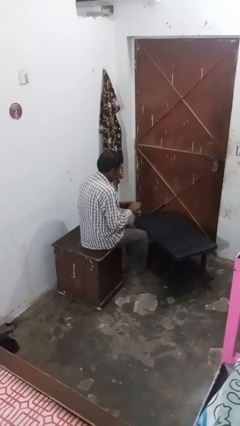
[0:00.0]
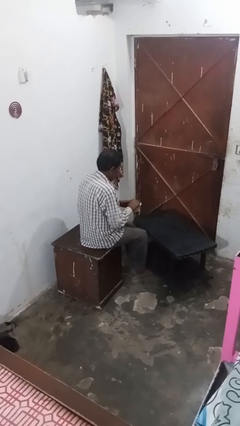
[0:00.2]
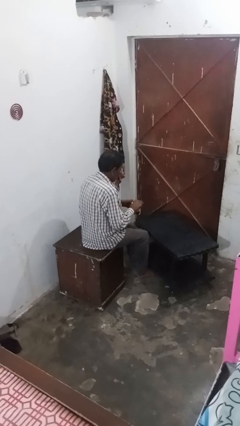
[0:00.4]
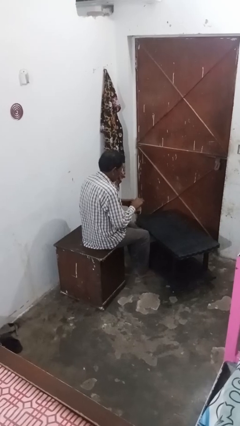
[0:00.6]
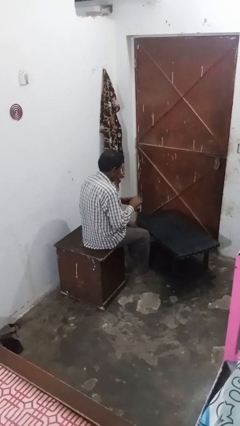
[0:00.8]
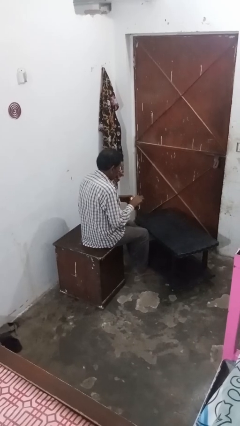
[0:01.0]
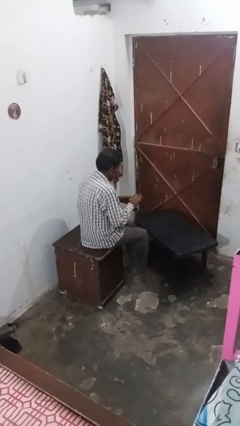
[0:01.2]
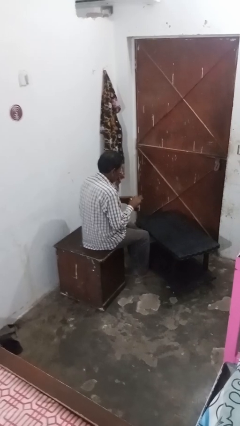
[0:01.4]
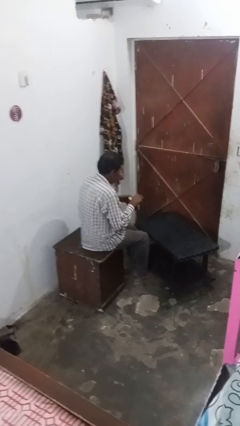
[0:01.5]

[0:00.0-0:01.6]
person stirs mug

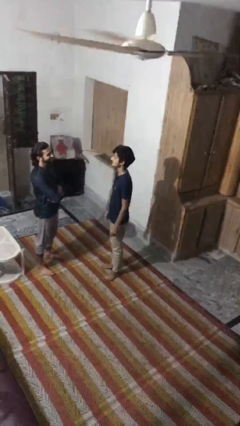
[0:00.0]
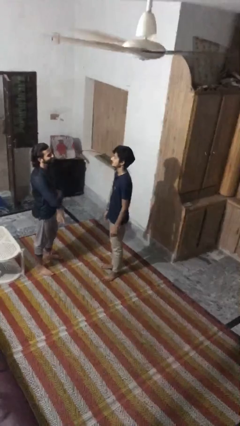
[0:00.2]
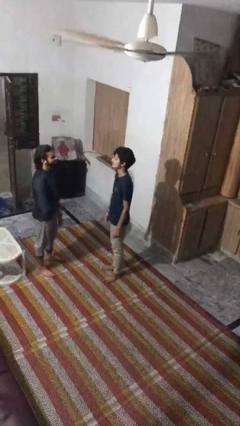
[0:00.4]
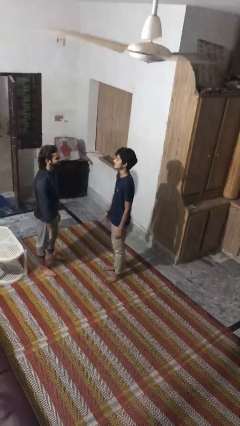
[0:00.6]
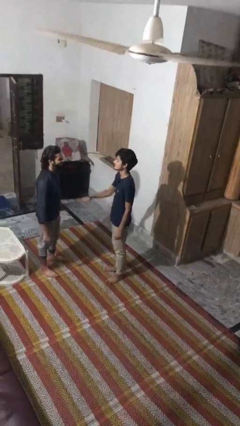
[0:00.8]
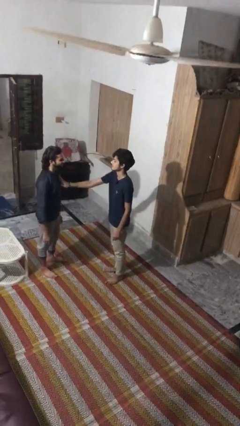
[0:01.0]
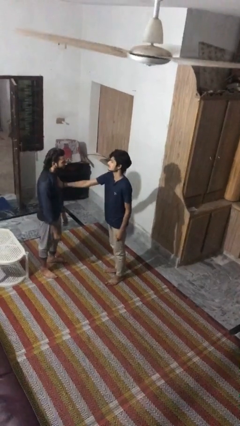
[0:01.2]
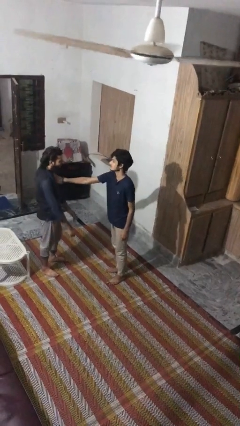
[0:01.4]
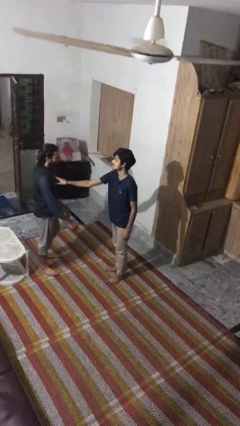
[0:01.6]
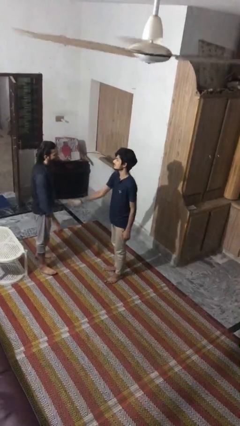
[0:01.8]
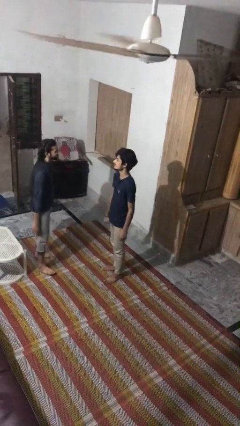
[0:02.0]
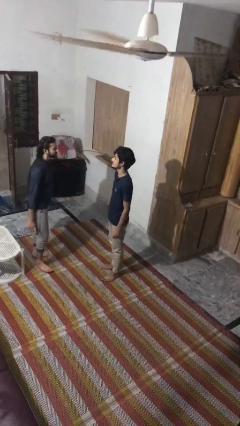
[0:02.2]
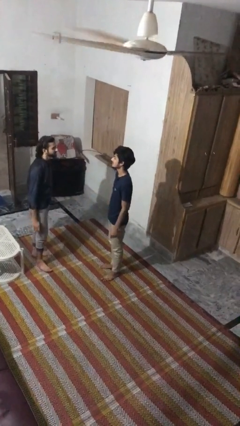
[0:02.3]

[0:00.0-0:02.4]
person shoves person

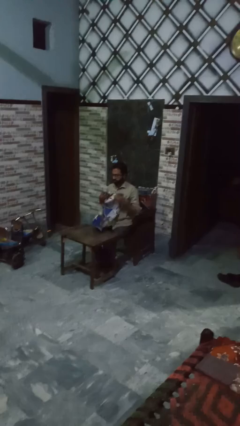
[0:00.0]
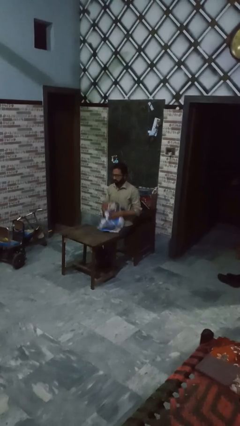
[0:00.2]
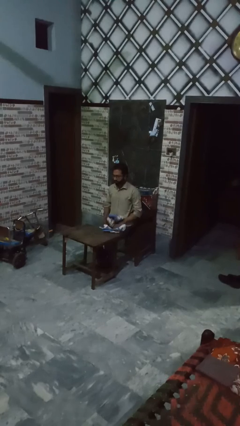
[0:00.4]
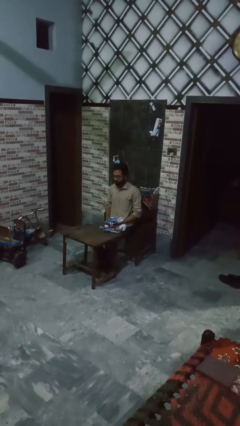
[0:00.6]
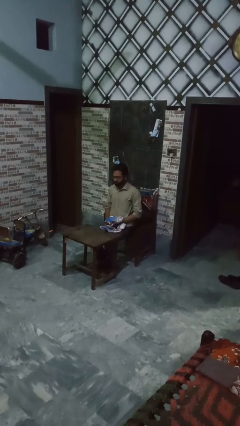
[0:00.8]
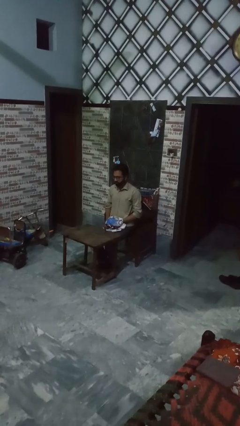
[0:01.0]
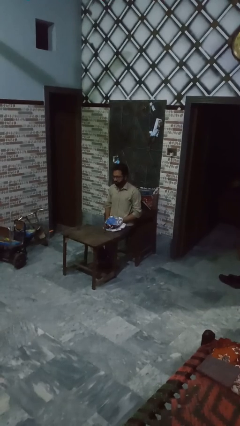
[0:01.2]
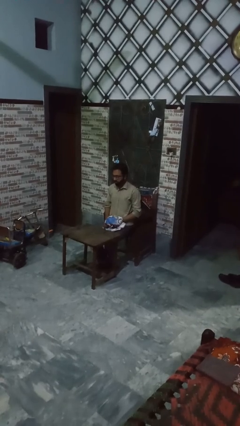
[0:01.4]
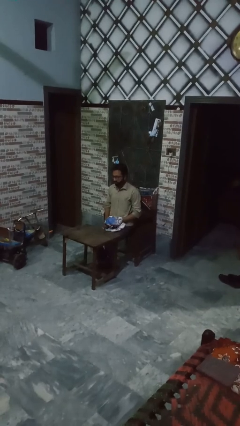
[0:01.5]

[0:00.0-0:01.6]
person spreads tablecloth

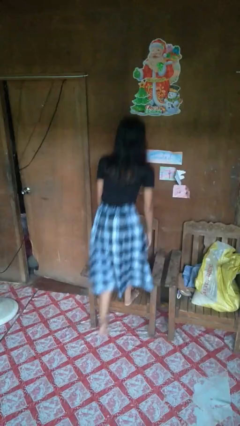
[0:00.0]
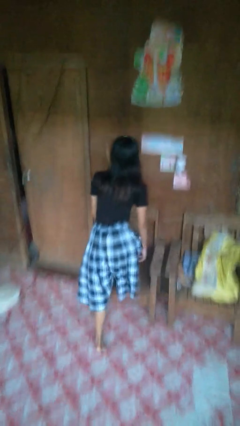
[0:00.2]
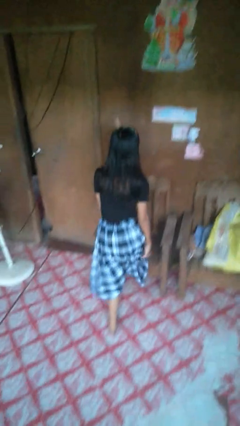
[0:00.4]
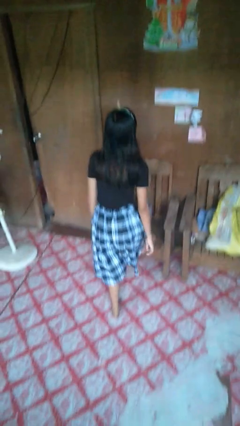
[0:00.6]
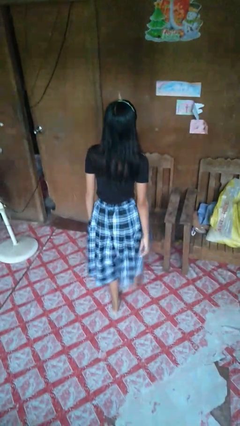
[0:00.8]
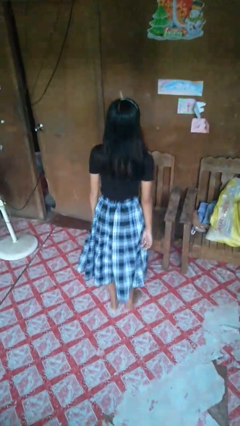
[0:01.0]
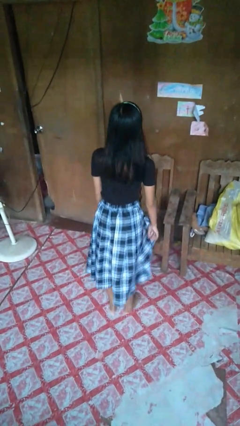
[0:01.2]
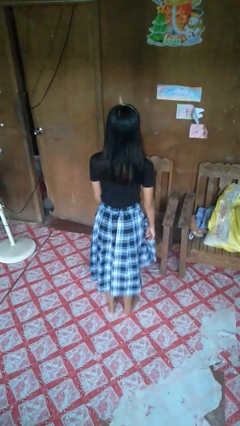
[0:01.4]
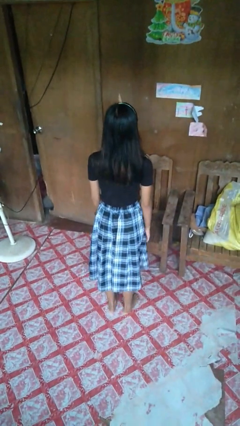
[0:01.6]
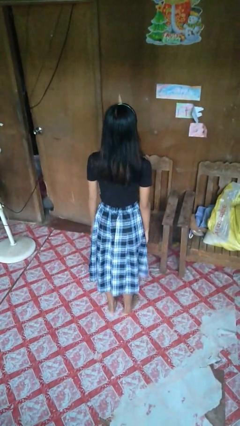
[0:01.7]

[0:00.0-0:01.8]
person climbs off chair

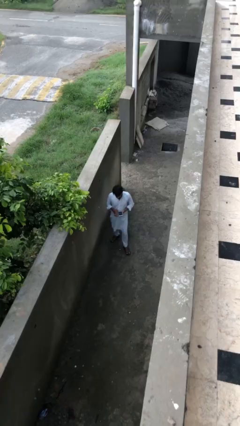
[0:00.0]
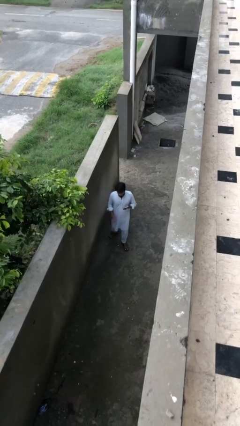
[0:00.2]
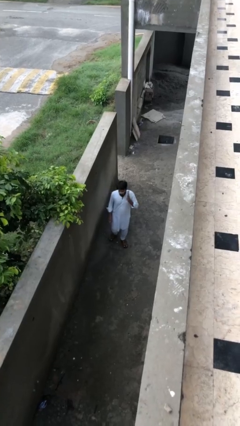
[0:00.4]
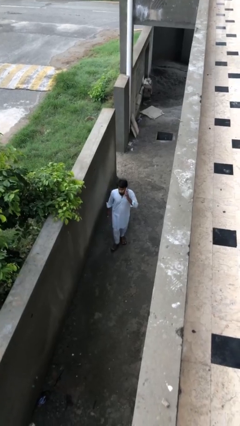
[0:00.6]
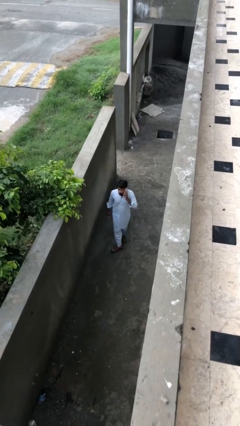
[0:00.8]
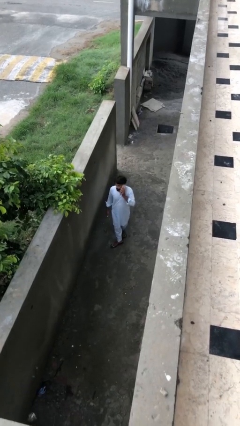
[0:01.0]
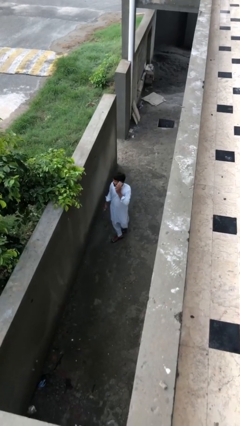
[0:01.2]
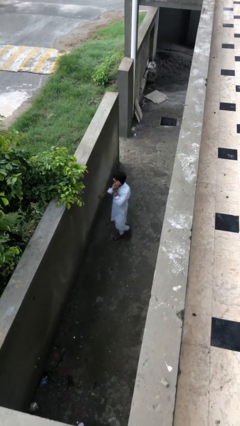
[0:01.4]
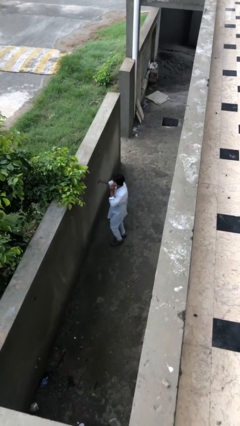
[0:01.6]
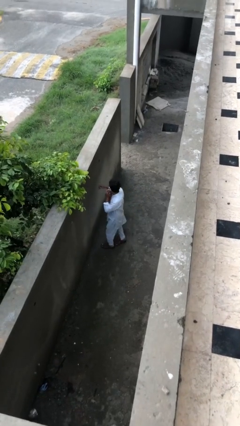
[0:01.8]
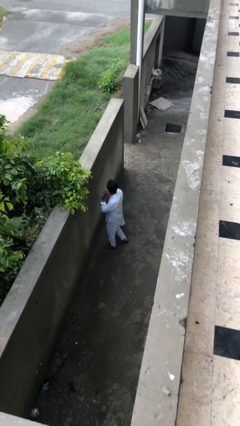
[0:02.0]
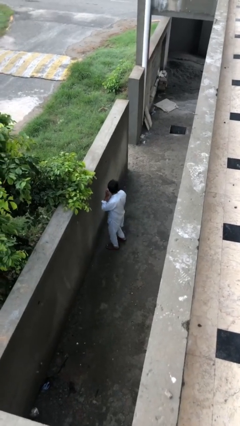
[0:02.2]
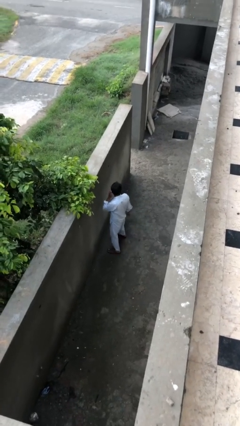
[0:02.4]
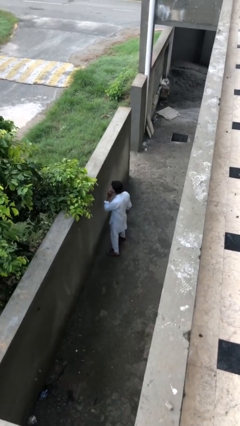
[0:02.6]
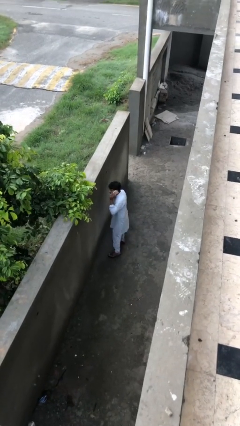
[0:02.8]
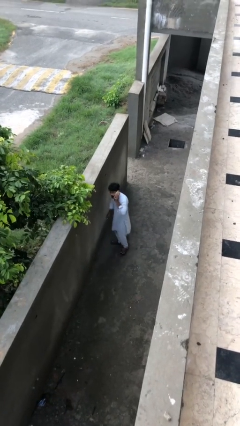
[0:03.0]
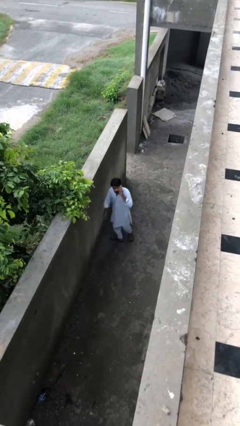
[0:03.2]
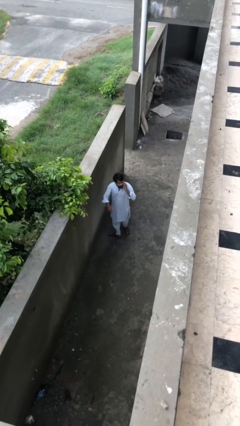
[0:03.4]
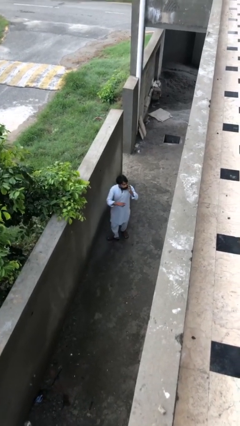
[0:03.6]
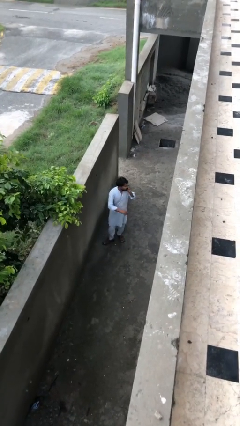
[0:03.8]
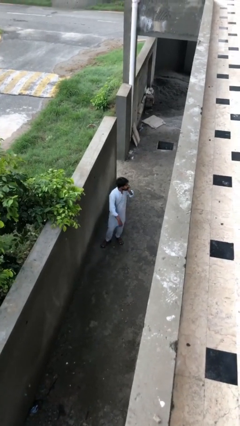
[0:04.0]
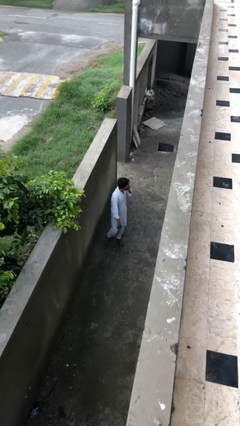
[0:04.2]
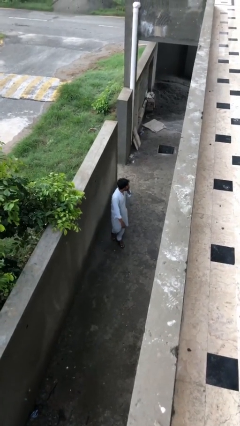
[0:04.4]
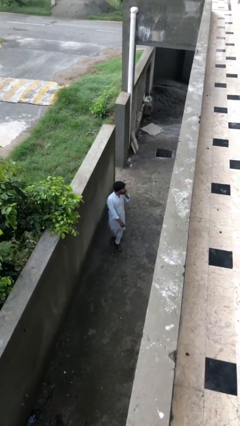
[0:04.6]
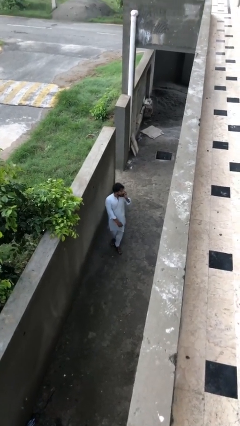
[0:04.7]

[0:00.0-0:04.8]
person talks on phone

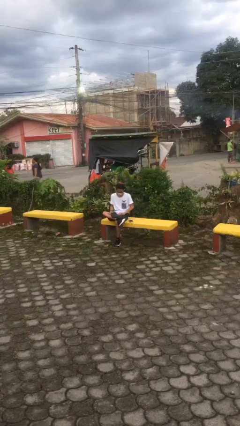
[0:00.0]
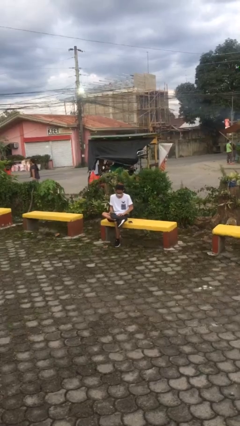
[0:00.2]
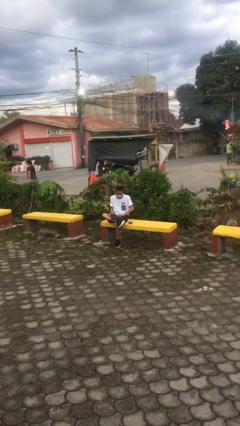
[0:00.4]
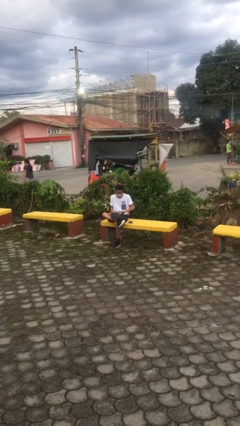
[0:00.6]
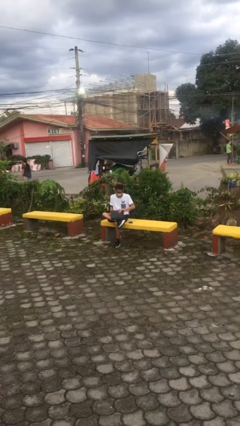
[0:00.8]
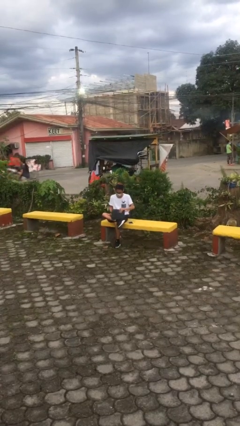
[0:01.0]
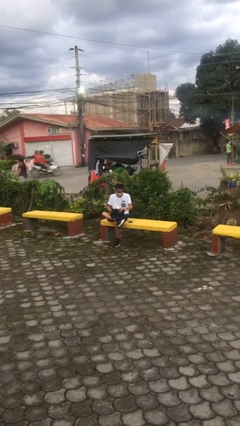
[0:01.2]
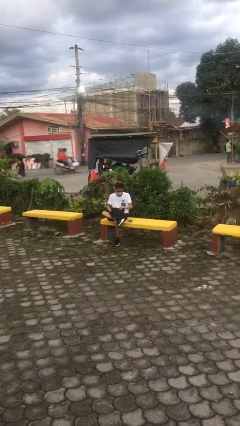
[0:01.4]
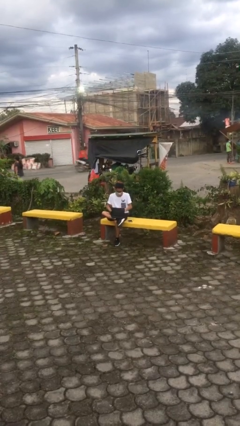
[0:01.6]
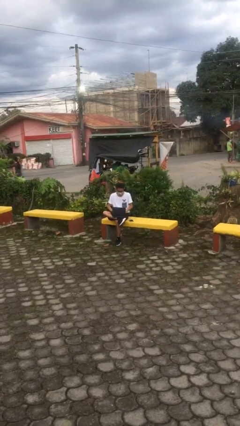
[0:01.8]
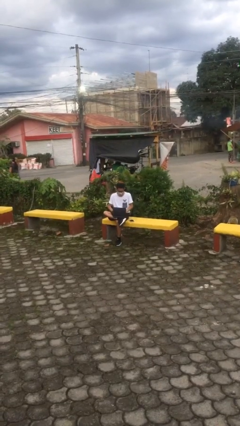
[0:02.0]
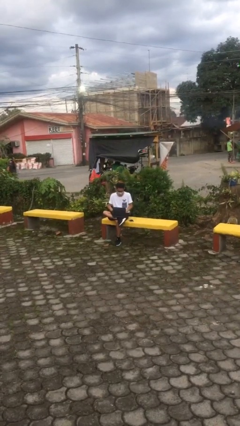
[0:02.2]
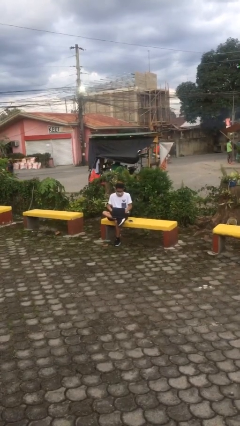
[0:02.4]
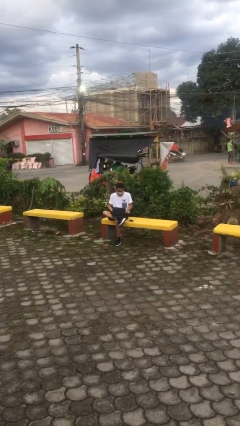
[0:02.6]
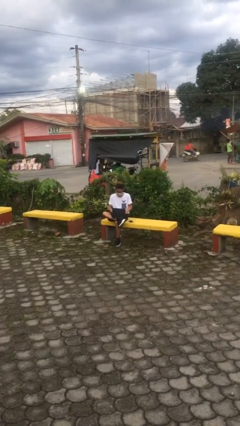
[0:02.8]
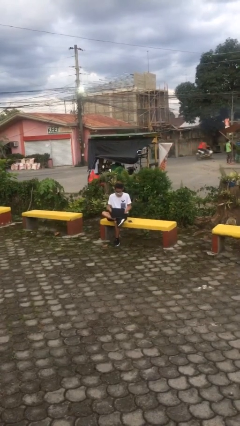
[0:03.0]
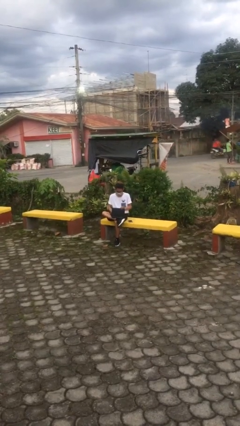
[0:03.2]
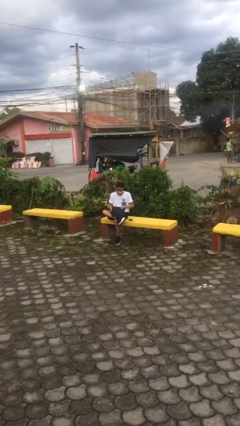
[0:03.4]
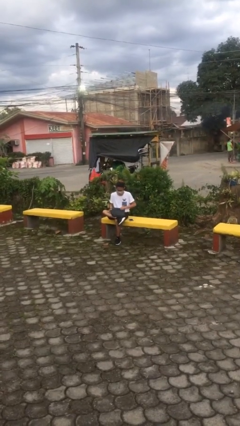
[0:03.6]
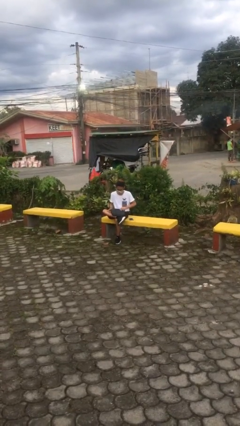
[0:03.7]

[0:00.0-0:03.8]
person interacts with laptop

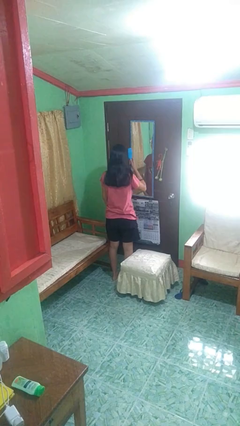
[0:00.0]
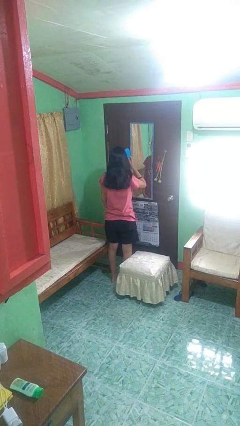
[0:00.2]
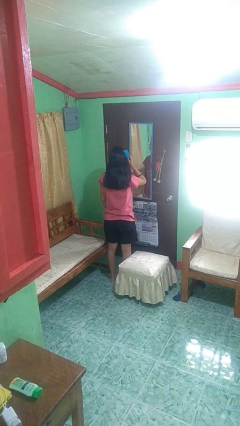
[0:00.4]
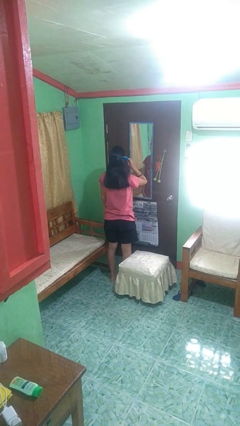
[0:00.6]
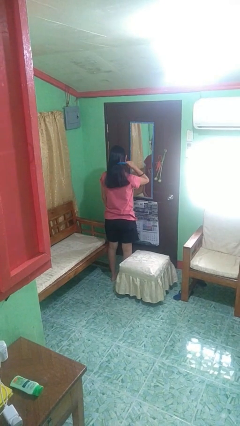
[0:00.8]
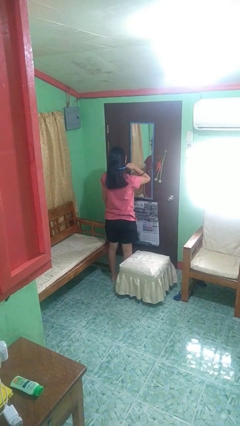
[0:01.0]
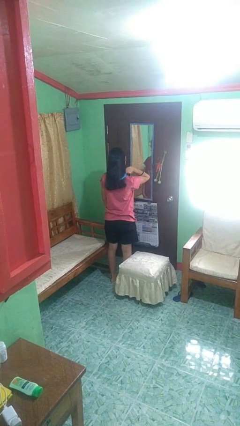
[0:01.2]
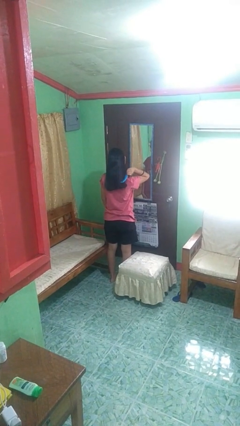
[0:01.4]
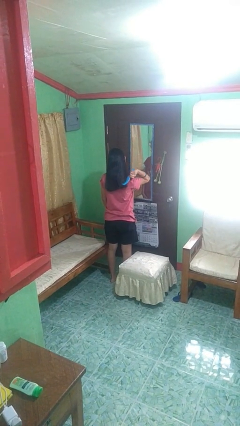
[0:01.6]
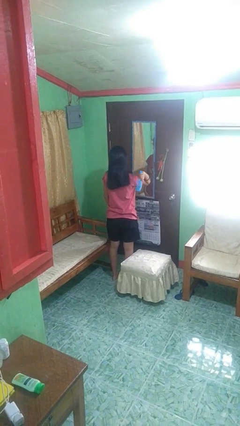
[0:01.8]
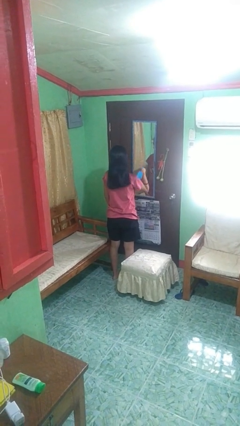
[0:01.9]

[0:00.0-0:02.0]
person brushes hair
